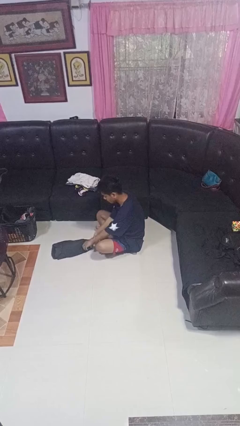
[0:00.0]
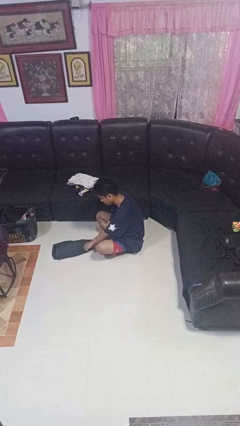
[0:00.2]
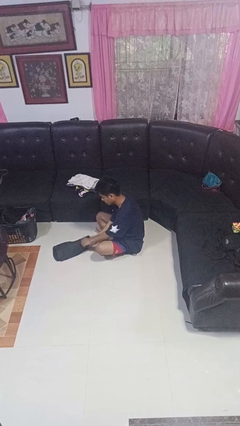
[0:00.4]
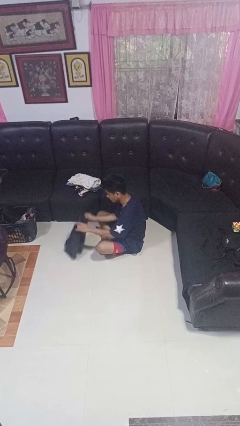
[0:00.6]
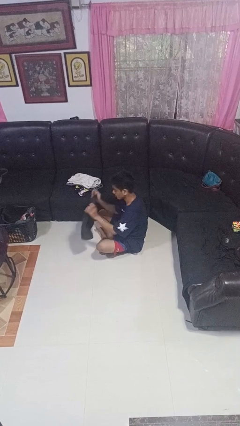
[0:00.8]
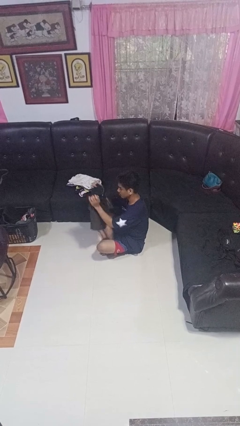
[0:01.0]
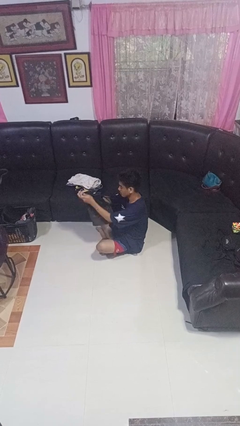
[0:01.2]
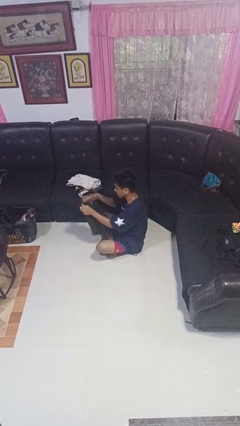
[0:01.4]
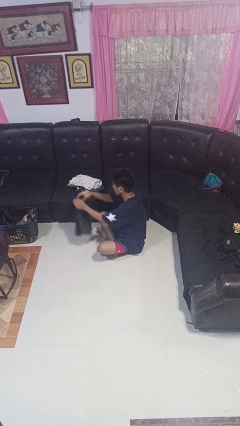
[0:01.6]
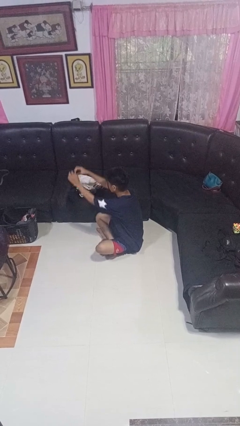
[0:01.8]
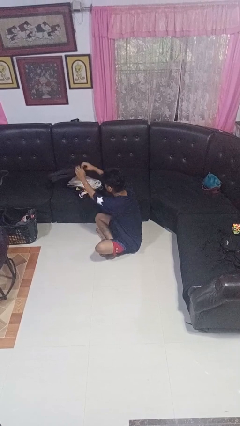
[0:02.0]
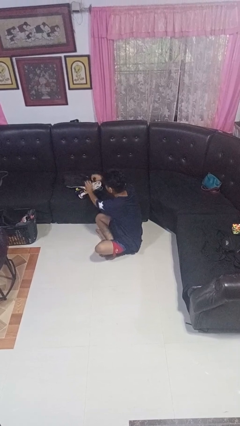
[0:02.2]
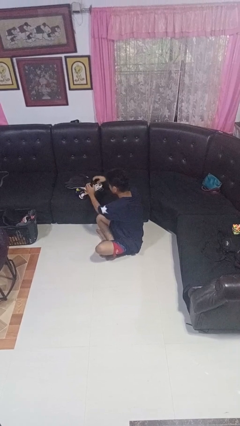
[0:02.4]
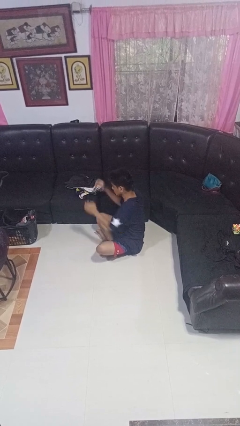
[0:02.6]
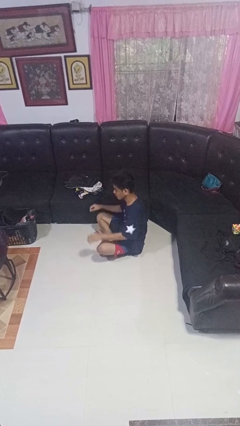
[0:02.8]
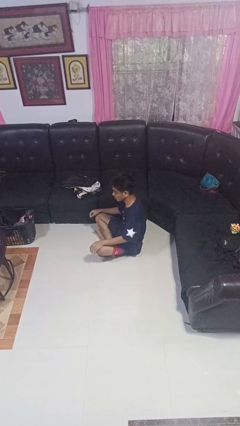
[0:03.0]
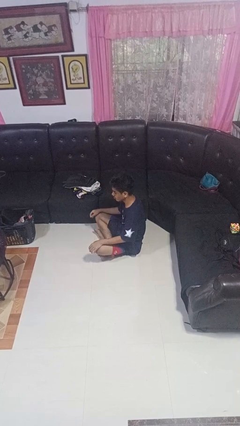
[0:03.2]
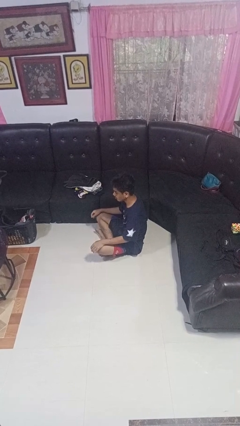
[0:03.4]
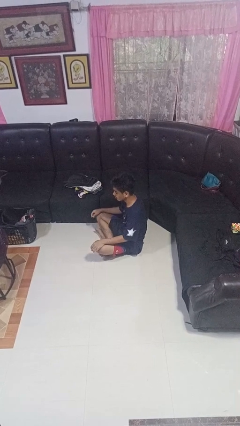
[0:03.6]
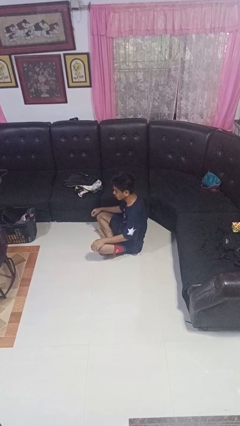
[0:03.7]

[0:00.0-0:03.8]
person folds pants

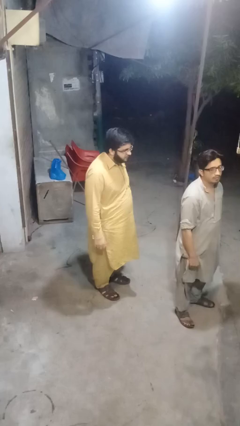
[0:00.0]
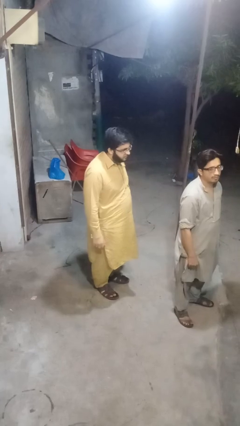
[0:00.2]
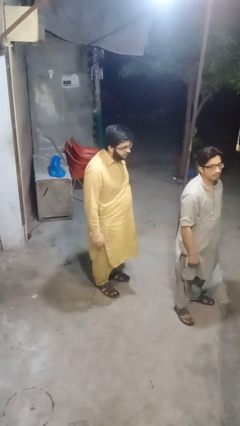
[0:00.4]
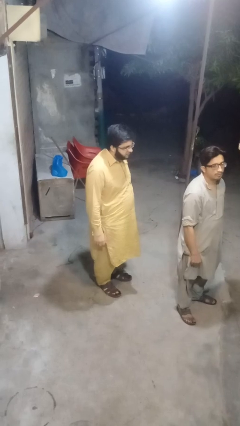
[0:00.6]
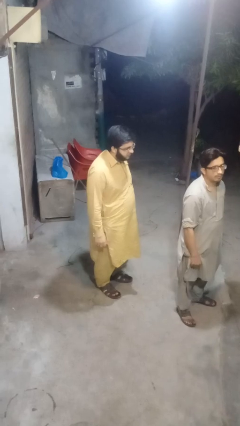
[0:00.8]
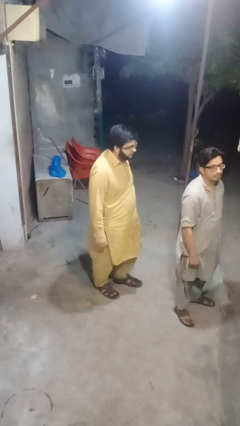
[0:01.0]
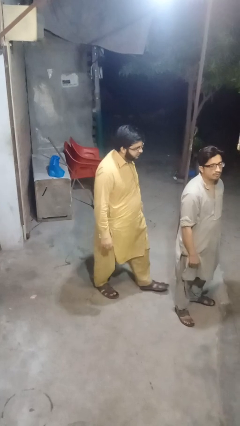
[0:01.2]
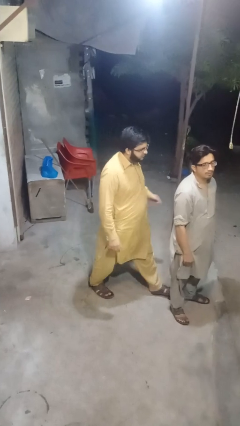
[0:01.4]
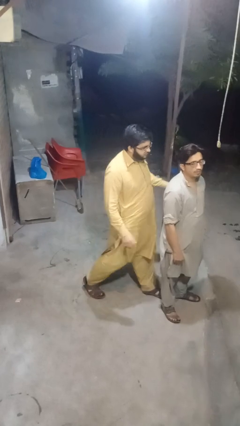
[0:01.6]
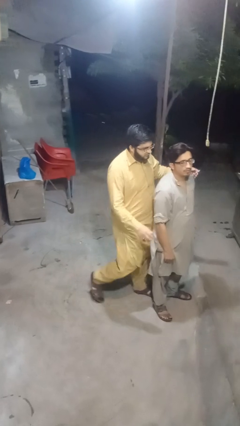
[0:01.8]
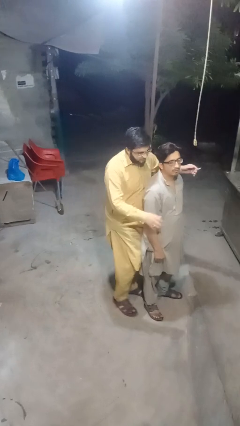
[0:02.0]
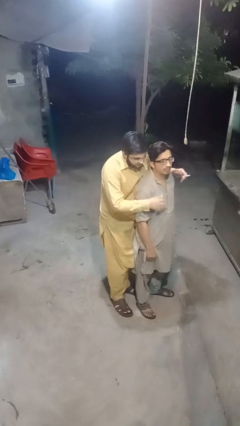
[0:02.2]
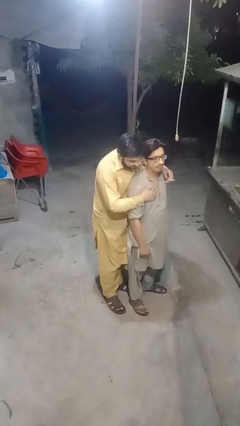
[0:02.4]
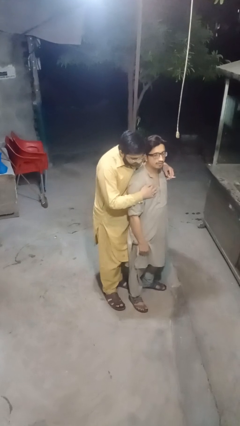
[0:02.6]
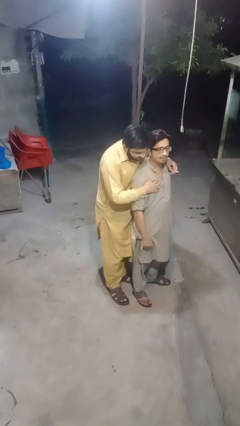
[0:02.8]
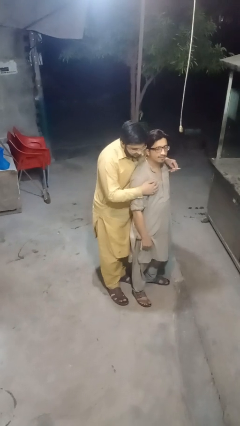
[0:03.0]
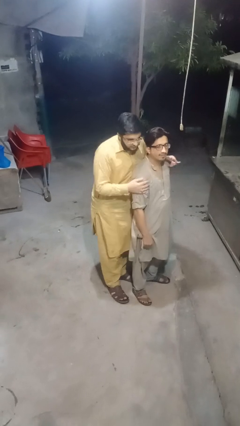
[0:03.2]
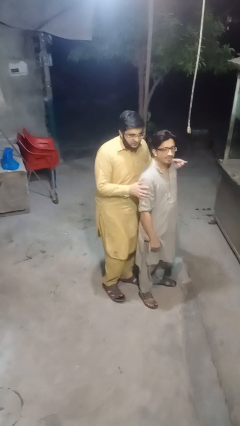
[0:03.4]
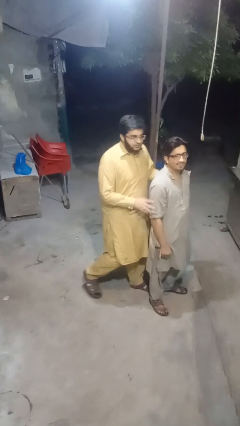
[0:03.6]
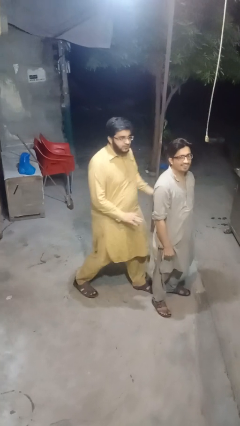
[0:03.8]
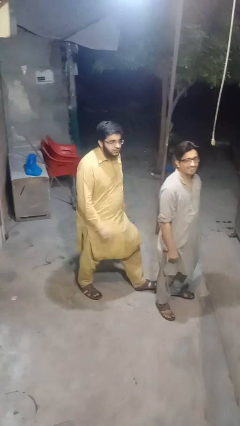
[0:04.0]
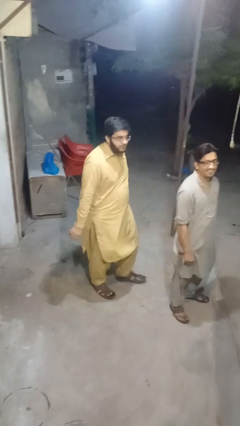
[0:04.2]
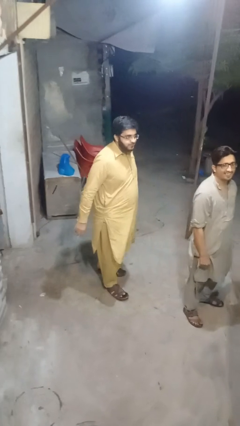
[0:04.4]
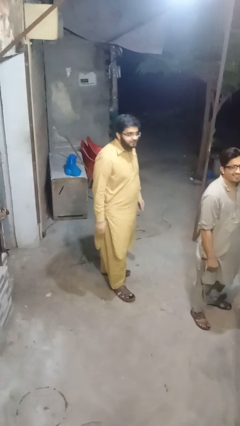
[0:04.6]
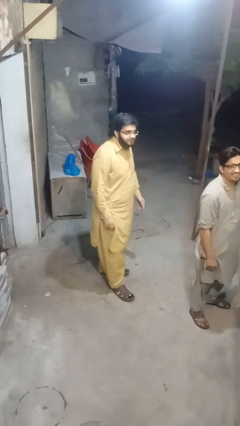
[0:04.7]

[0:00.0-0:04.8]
person hugs person from behind

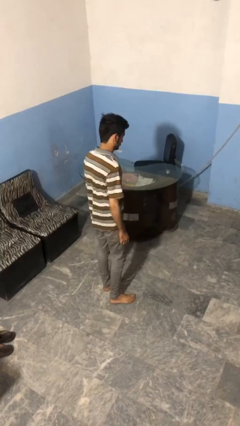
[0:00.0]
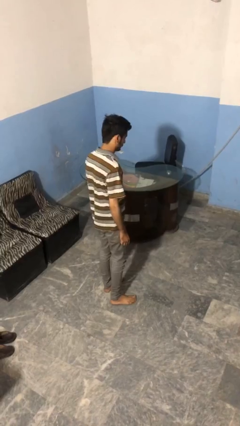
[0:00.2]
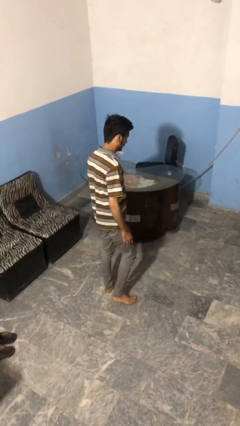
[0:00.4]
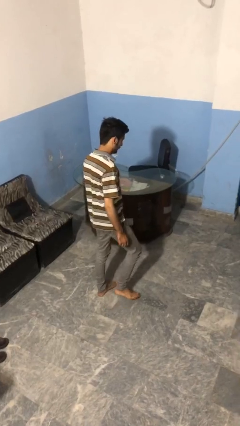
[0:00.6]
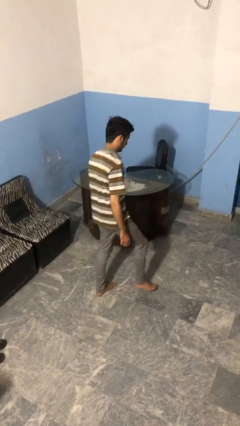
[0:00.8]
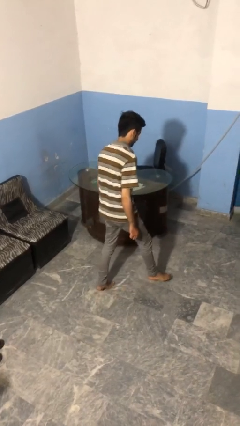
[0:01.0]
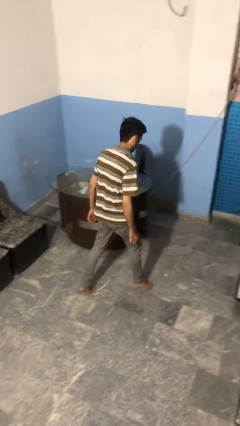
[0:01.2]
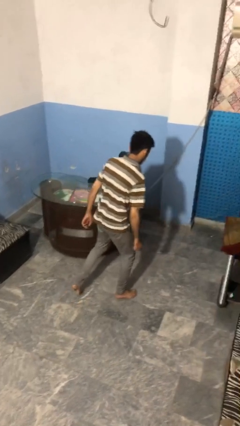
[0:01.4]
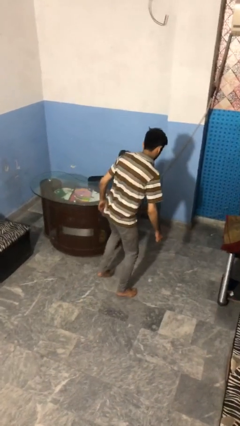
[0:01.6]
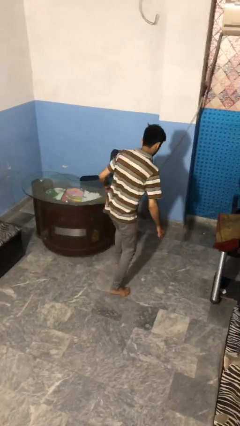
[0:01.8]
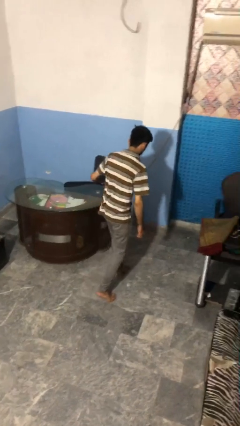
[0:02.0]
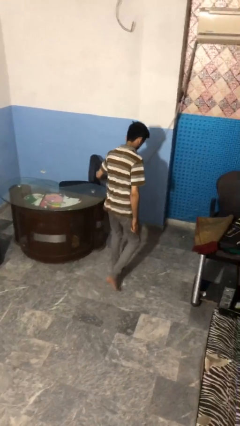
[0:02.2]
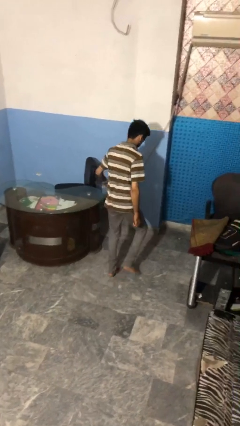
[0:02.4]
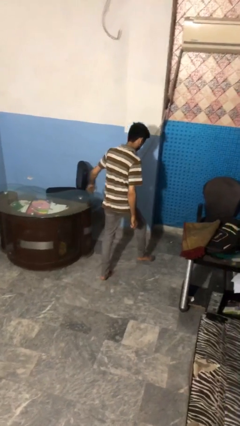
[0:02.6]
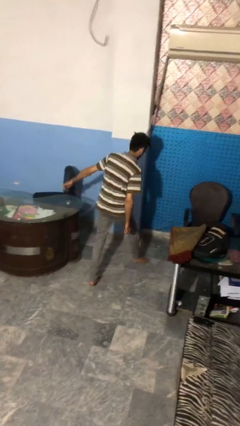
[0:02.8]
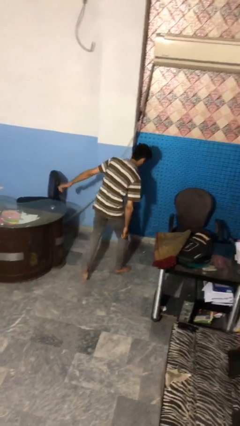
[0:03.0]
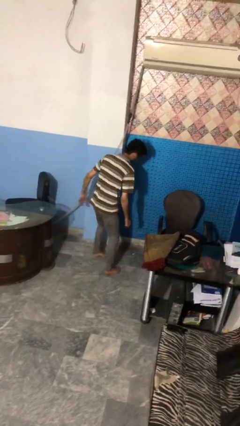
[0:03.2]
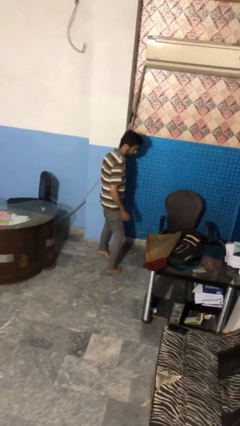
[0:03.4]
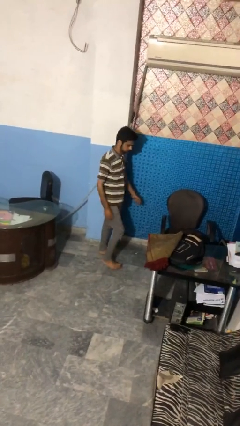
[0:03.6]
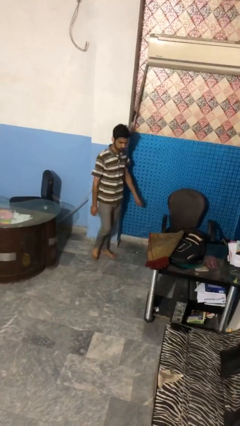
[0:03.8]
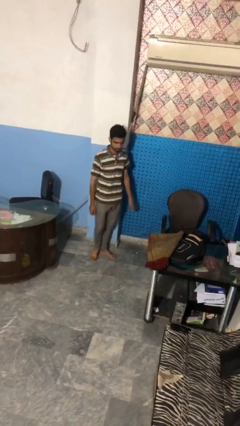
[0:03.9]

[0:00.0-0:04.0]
person walks tiptoe

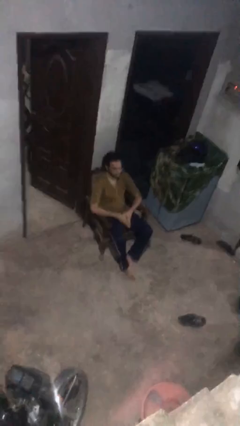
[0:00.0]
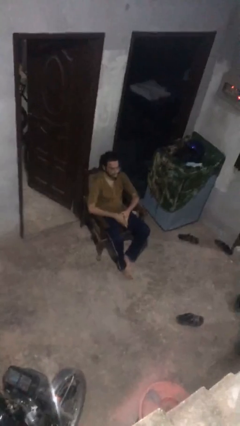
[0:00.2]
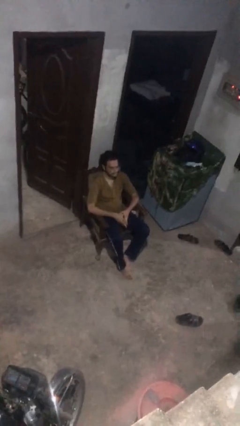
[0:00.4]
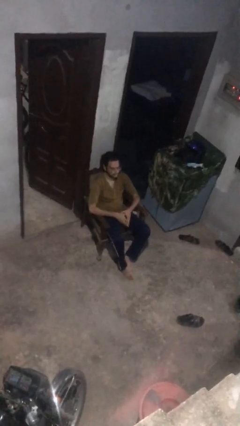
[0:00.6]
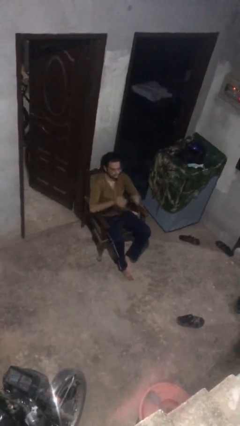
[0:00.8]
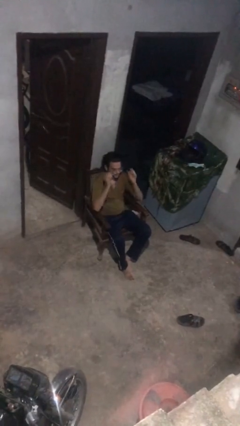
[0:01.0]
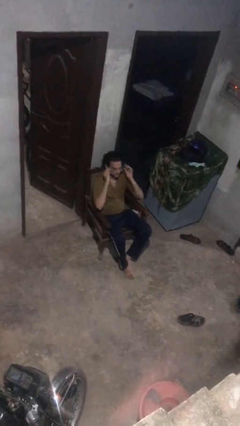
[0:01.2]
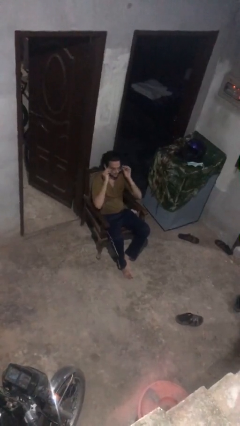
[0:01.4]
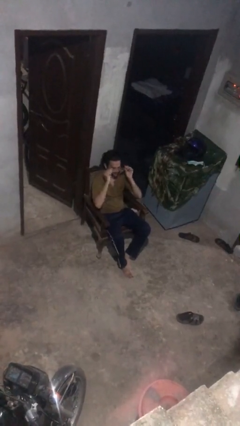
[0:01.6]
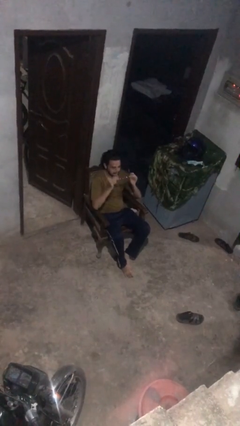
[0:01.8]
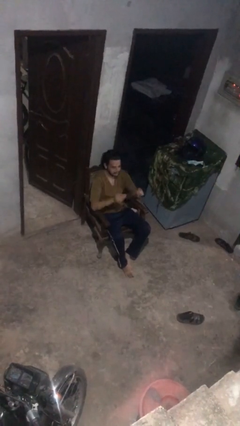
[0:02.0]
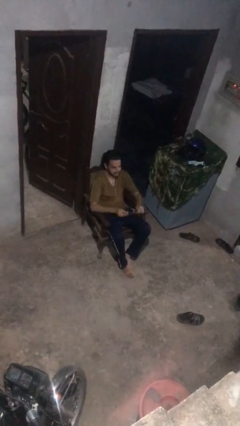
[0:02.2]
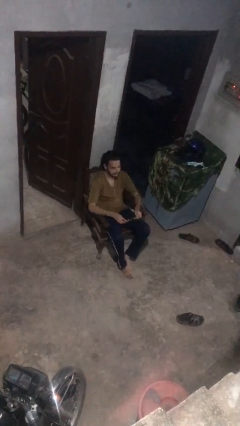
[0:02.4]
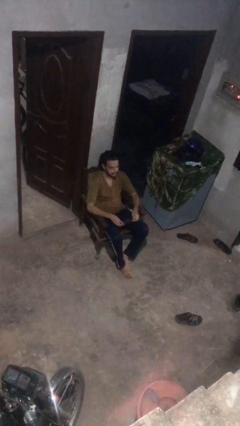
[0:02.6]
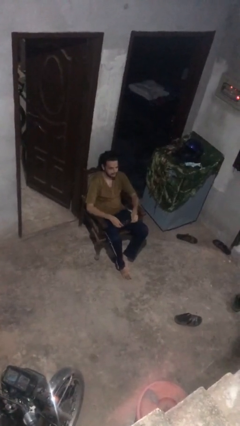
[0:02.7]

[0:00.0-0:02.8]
person takes off glasses

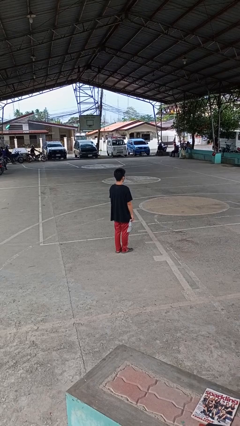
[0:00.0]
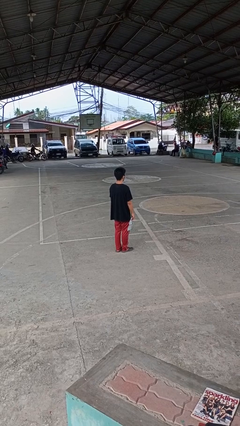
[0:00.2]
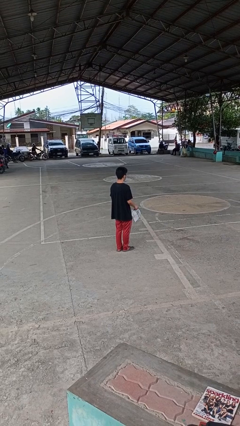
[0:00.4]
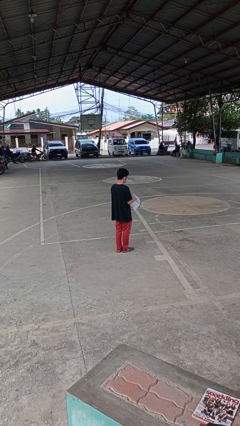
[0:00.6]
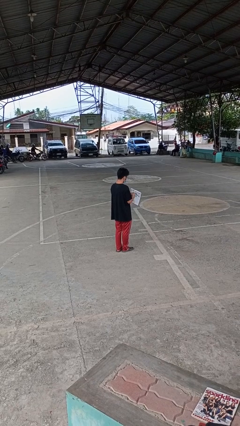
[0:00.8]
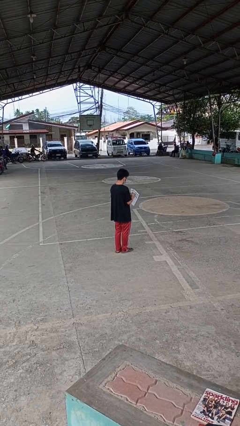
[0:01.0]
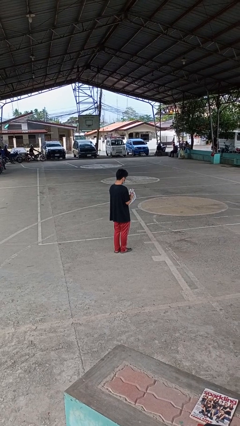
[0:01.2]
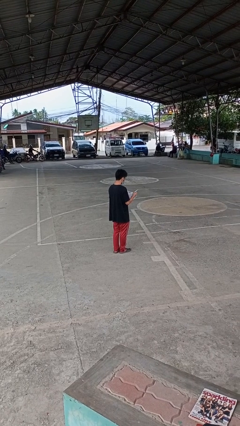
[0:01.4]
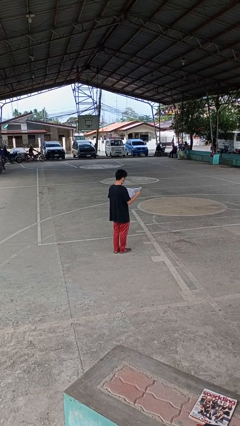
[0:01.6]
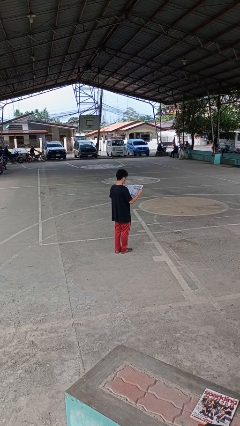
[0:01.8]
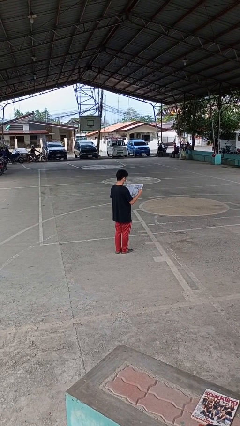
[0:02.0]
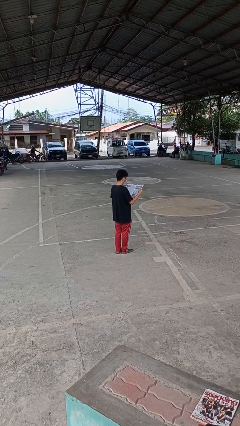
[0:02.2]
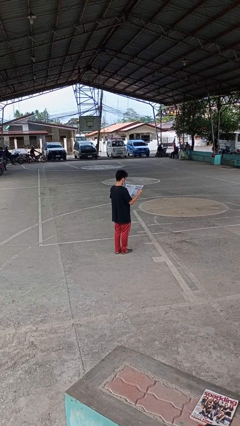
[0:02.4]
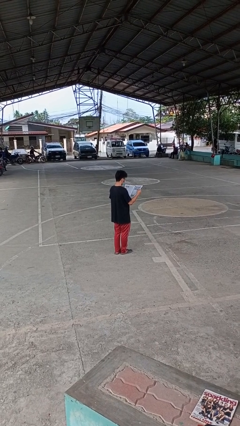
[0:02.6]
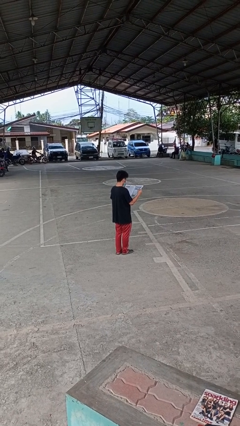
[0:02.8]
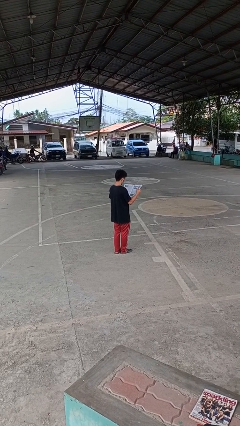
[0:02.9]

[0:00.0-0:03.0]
person reads newspaper
